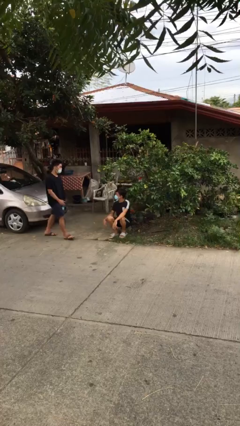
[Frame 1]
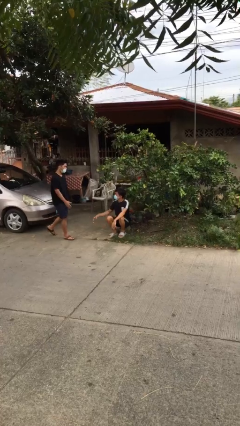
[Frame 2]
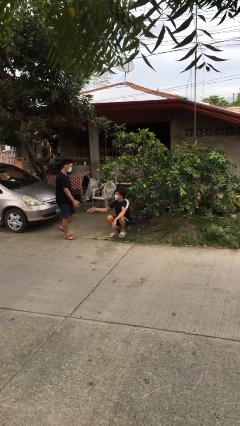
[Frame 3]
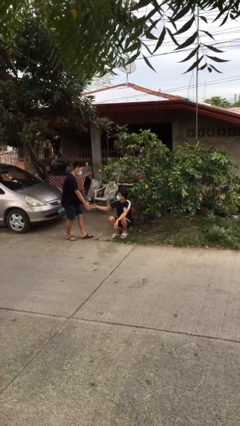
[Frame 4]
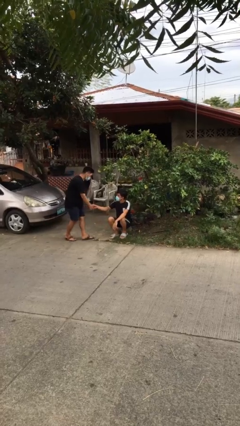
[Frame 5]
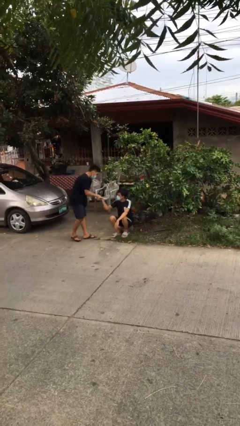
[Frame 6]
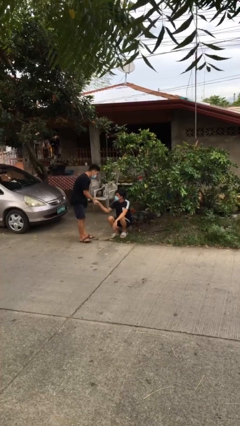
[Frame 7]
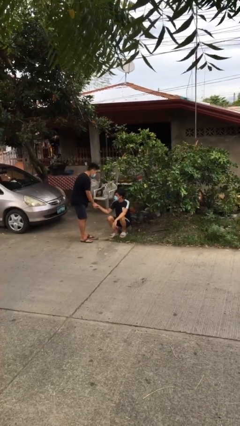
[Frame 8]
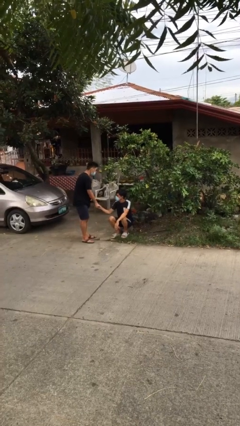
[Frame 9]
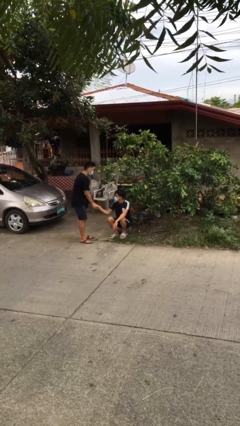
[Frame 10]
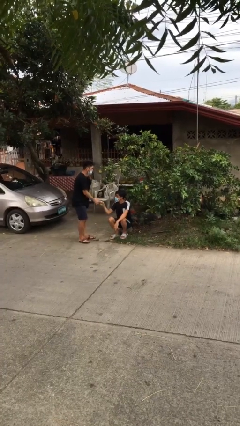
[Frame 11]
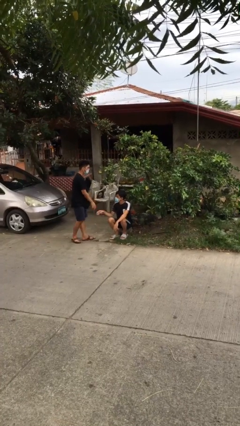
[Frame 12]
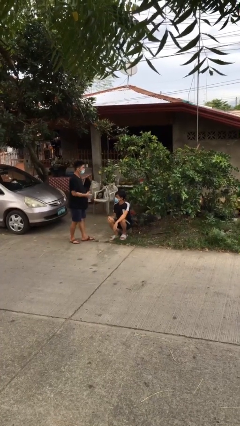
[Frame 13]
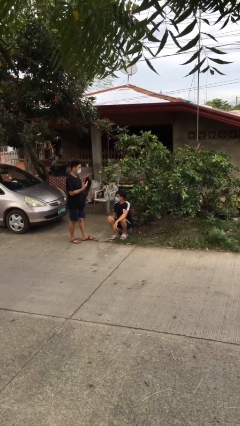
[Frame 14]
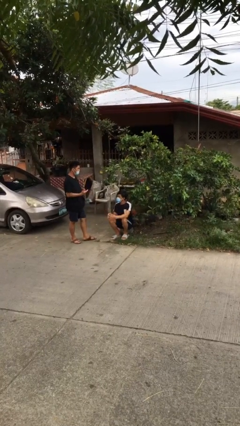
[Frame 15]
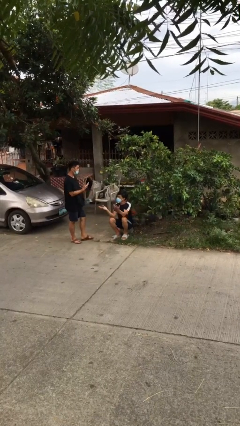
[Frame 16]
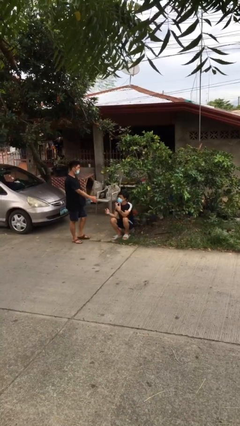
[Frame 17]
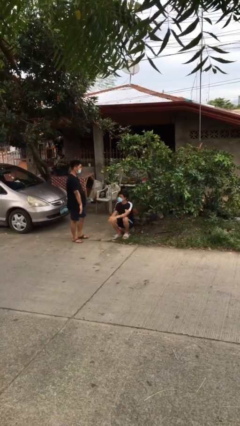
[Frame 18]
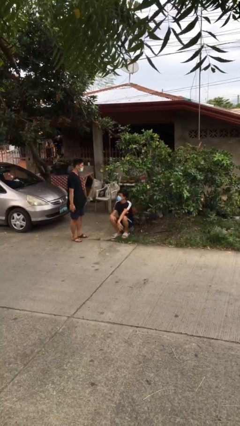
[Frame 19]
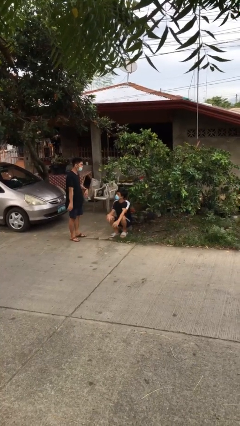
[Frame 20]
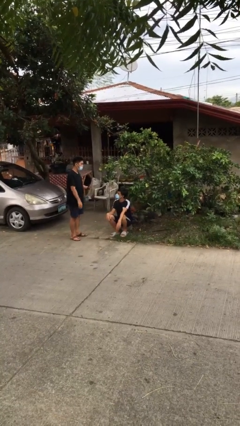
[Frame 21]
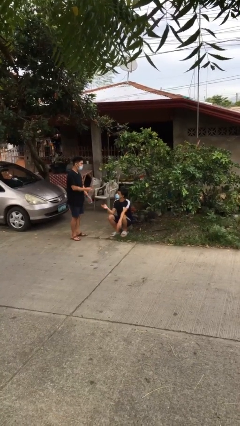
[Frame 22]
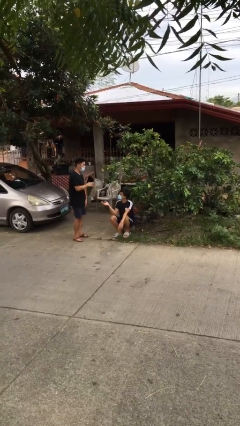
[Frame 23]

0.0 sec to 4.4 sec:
person shakes hand

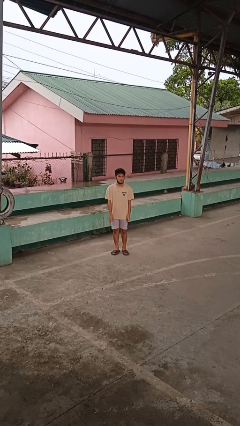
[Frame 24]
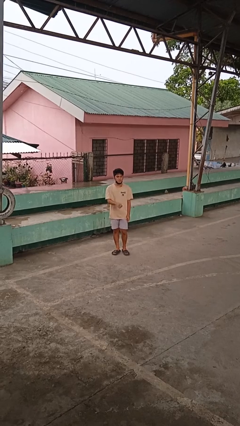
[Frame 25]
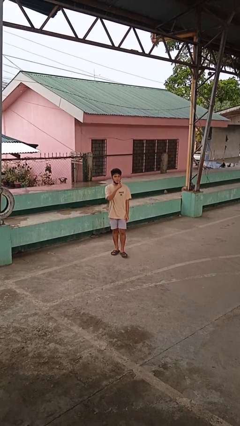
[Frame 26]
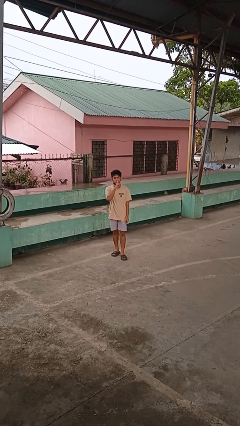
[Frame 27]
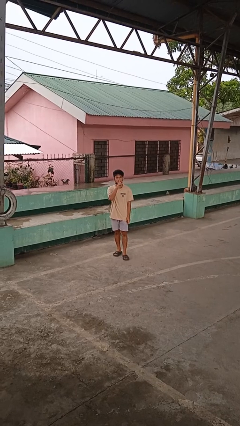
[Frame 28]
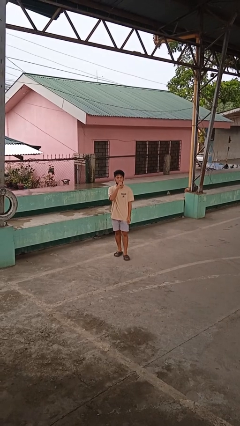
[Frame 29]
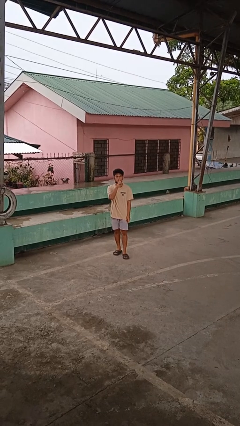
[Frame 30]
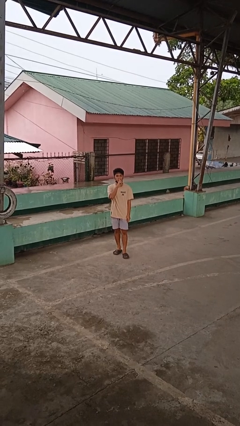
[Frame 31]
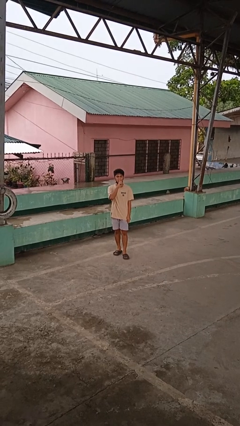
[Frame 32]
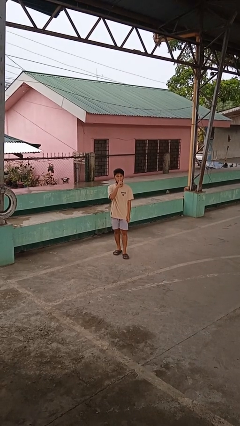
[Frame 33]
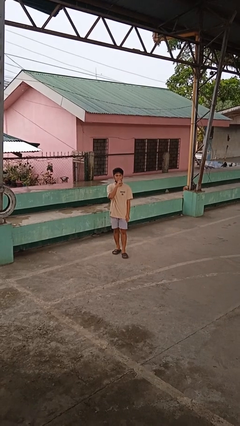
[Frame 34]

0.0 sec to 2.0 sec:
person gestures be quiet

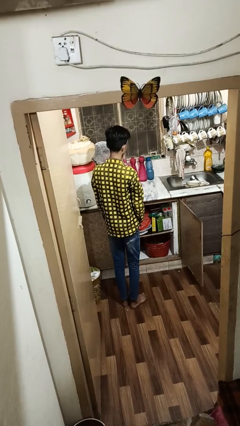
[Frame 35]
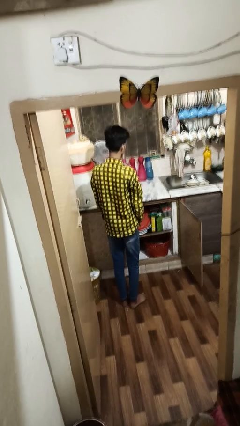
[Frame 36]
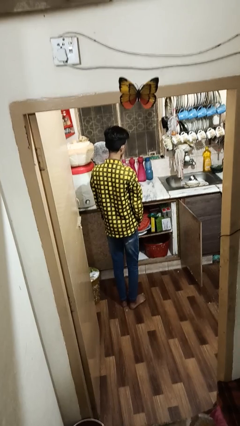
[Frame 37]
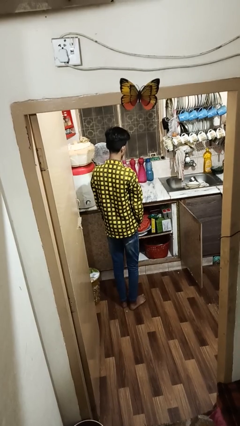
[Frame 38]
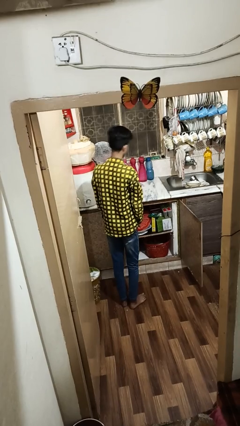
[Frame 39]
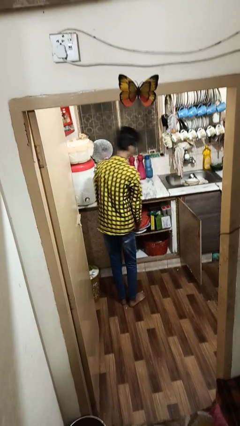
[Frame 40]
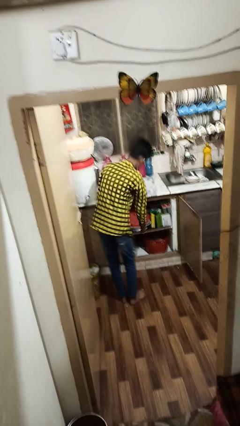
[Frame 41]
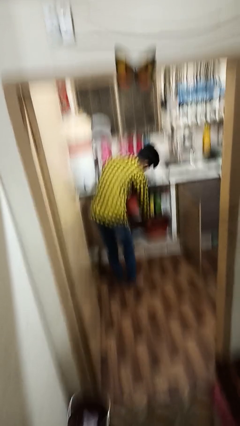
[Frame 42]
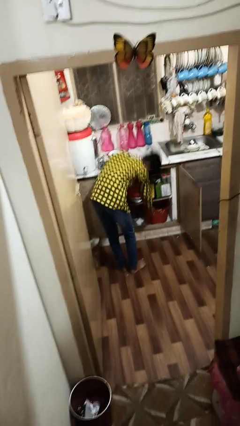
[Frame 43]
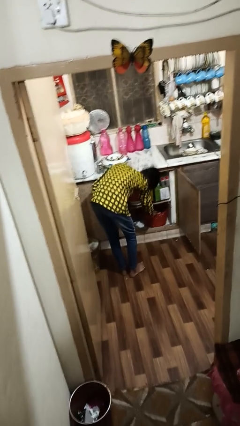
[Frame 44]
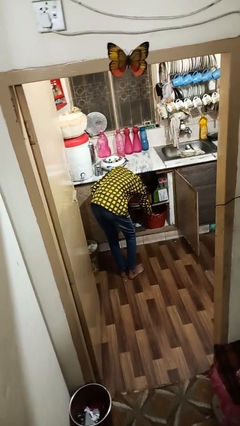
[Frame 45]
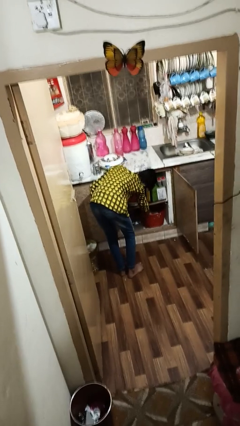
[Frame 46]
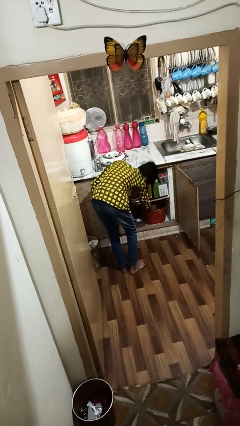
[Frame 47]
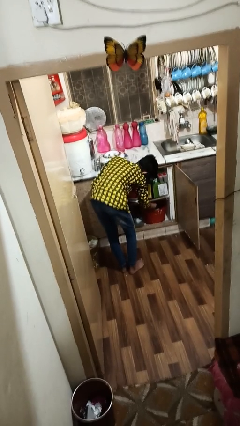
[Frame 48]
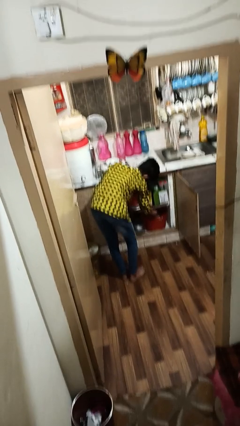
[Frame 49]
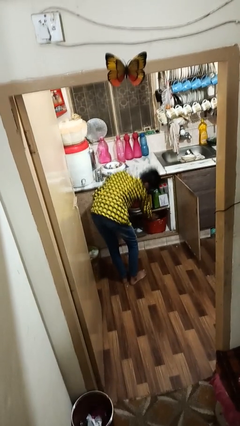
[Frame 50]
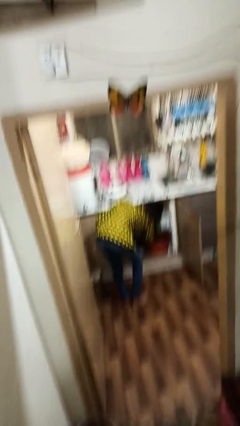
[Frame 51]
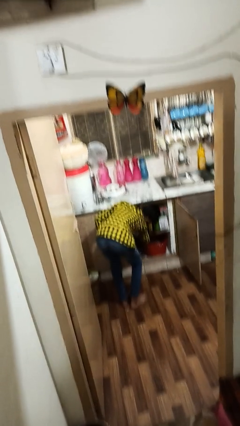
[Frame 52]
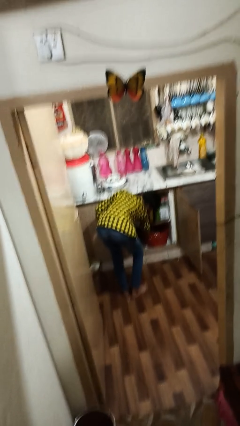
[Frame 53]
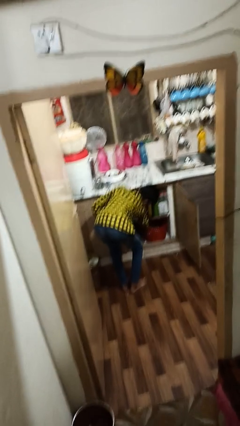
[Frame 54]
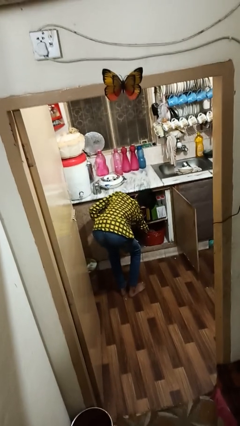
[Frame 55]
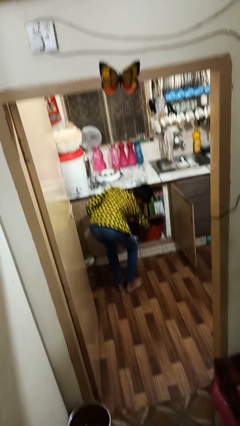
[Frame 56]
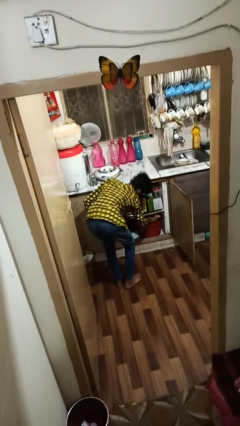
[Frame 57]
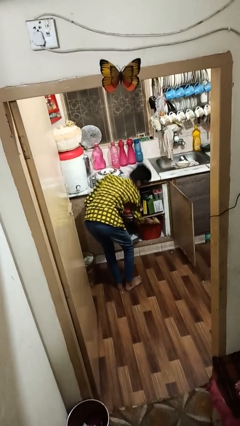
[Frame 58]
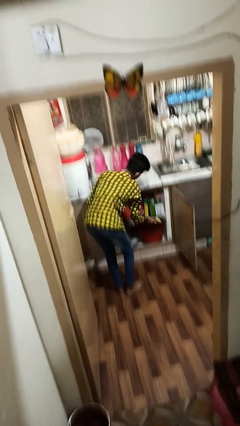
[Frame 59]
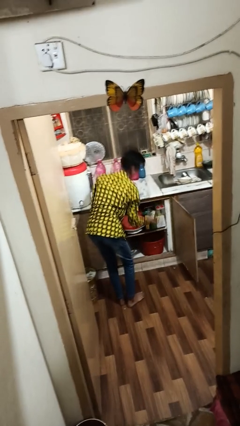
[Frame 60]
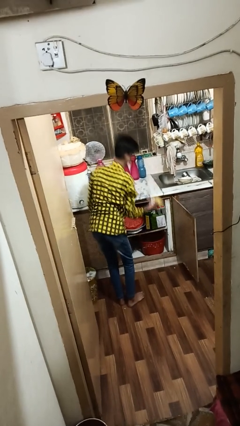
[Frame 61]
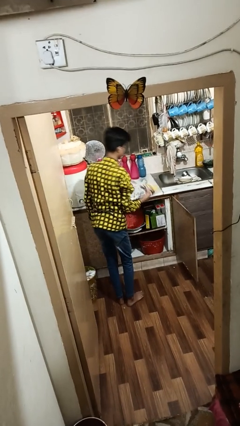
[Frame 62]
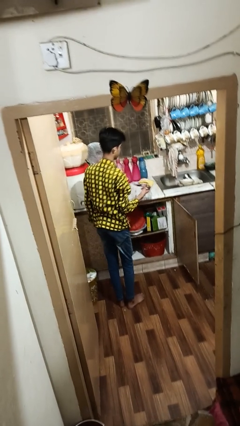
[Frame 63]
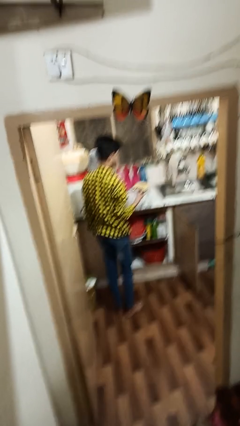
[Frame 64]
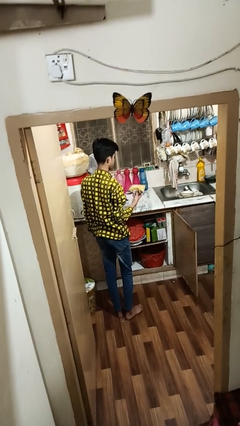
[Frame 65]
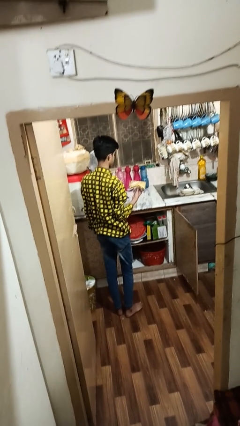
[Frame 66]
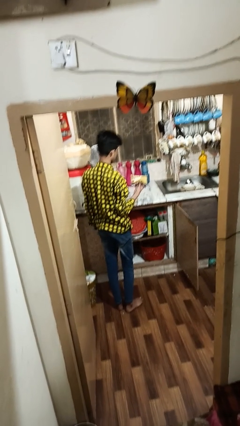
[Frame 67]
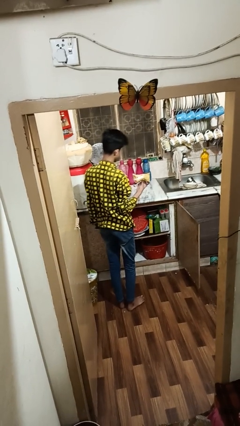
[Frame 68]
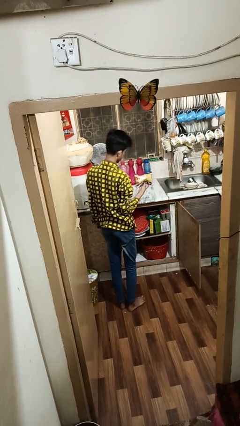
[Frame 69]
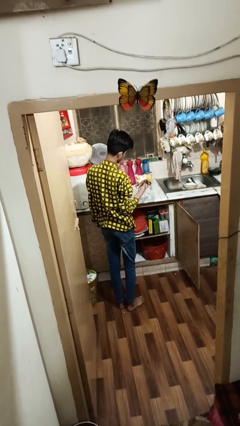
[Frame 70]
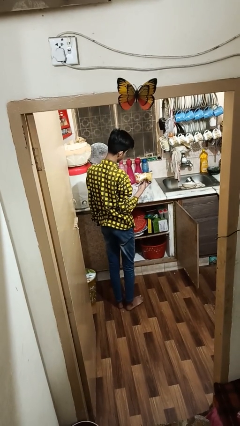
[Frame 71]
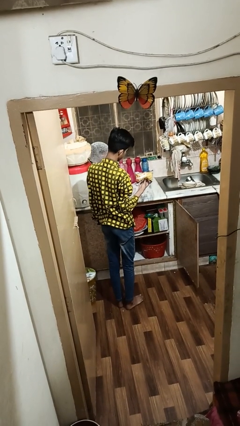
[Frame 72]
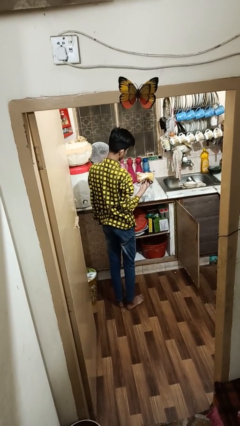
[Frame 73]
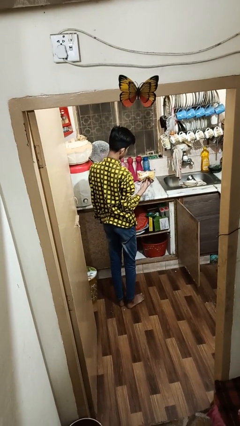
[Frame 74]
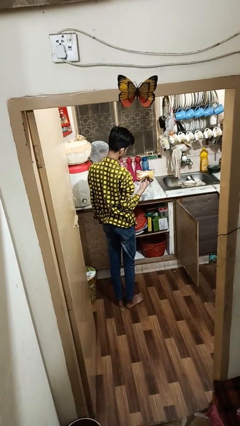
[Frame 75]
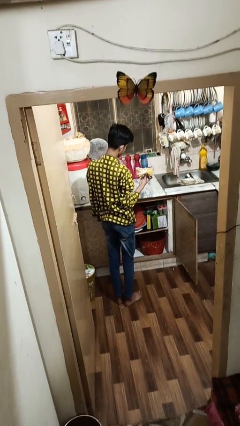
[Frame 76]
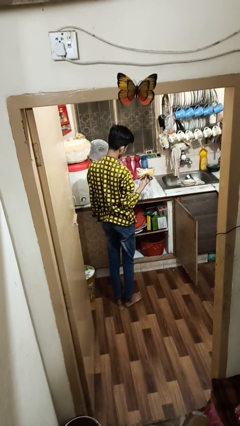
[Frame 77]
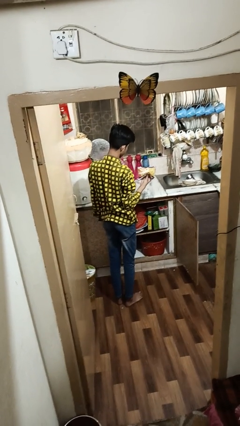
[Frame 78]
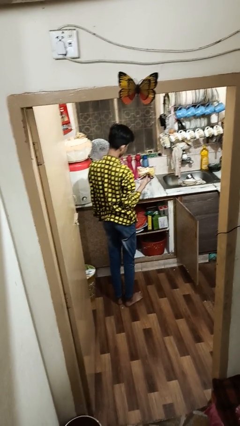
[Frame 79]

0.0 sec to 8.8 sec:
person takes object from cabinet

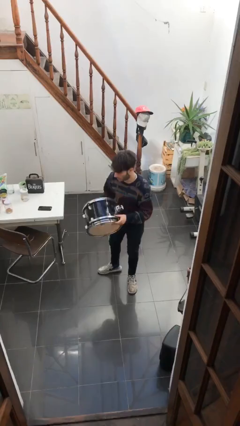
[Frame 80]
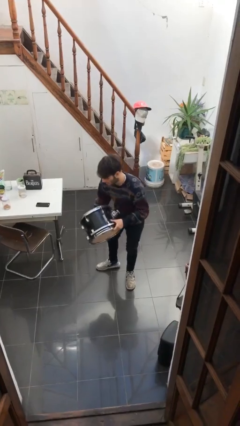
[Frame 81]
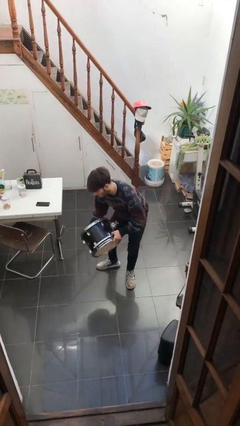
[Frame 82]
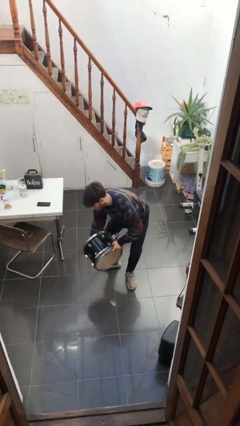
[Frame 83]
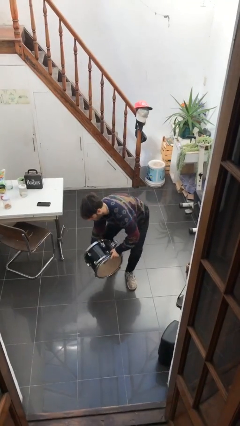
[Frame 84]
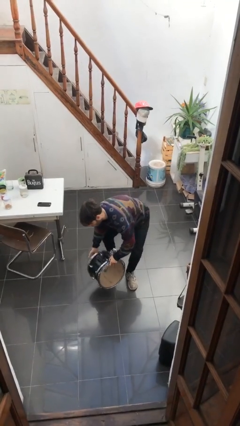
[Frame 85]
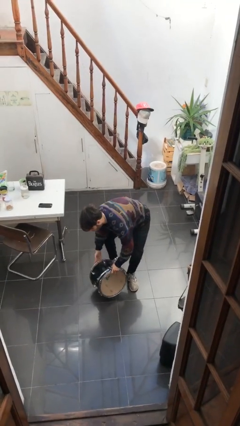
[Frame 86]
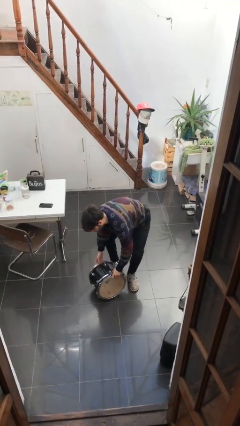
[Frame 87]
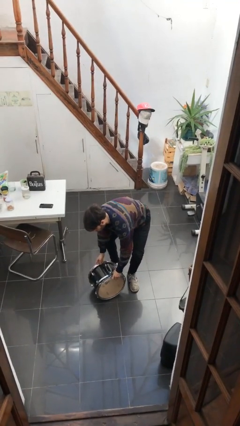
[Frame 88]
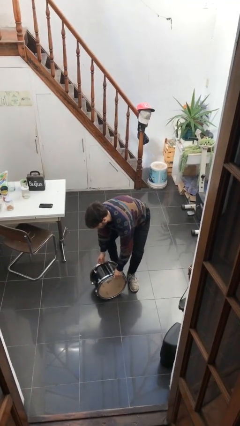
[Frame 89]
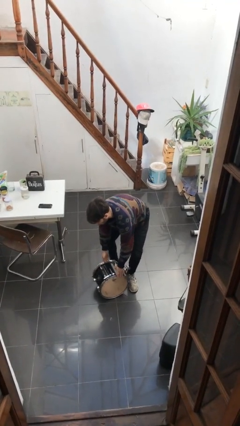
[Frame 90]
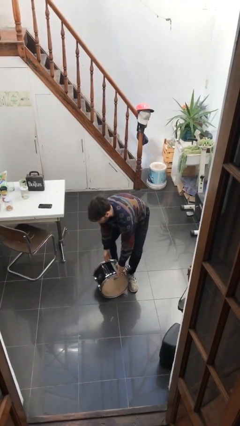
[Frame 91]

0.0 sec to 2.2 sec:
person puts down object on floor
